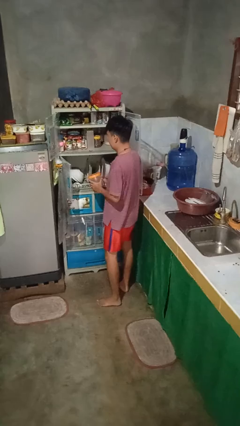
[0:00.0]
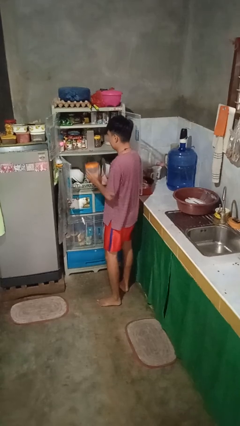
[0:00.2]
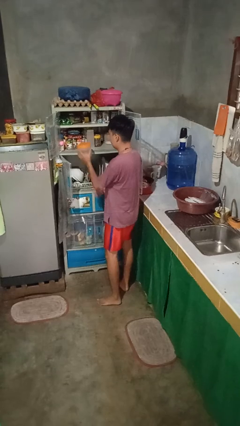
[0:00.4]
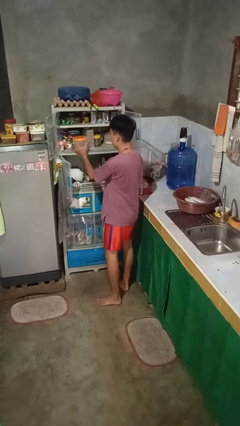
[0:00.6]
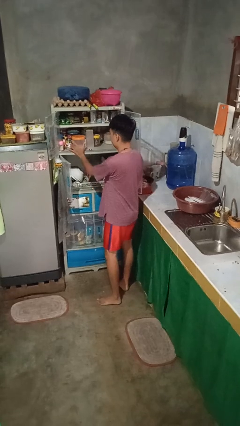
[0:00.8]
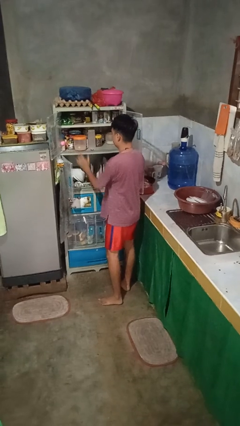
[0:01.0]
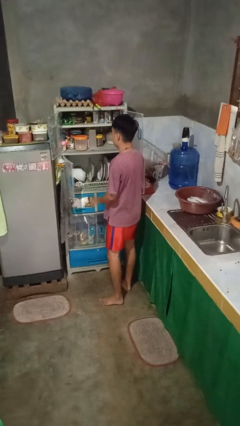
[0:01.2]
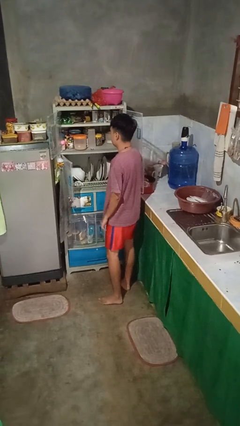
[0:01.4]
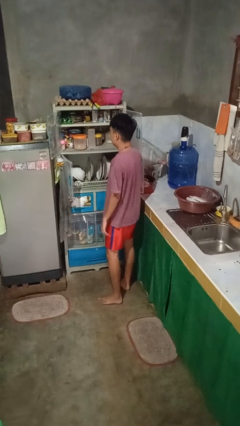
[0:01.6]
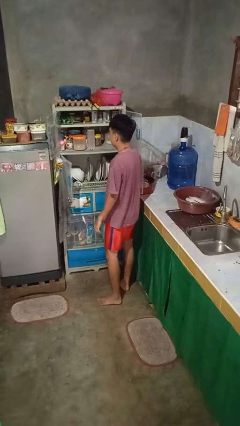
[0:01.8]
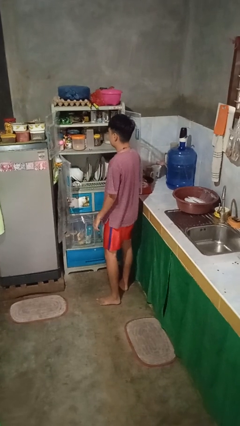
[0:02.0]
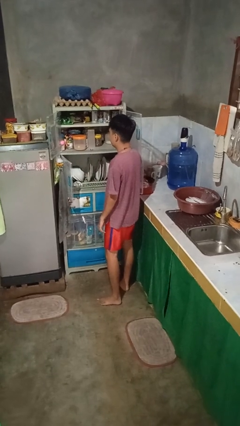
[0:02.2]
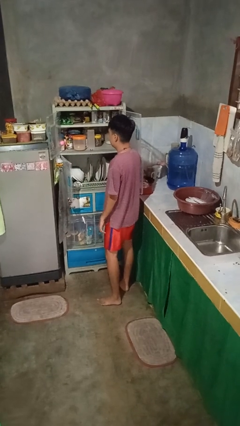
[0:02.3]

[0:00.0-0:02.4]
person puts object in cabinet

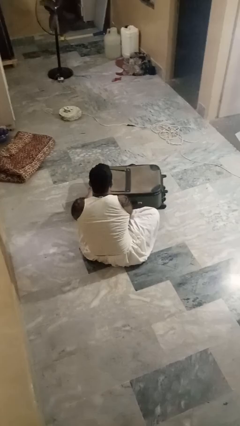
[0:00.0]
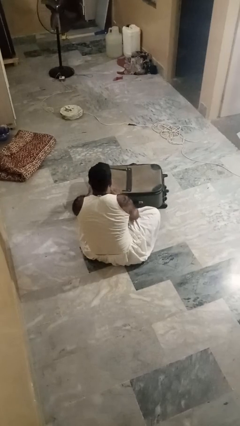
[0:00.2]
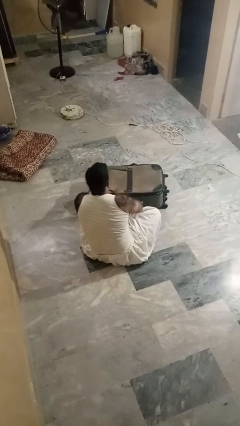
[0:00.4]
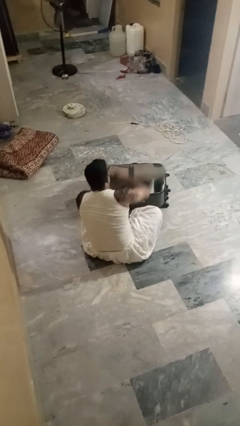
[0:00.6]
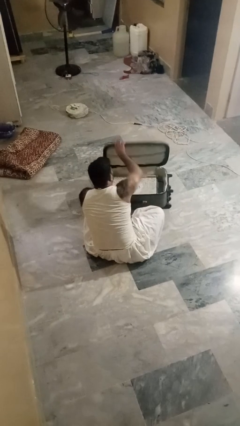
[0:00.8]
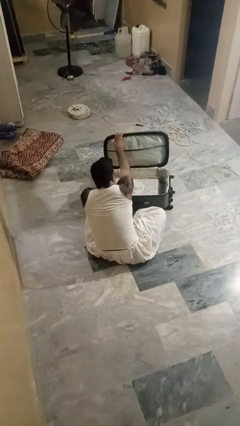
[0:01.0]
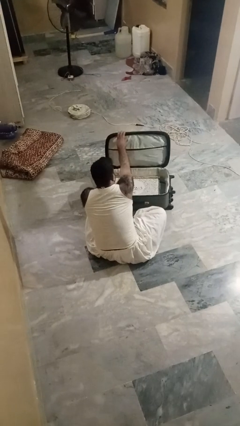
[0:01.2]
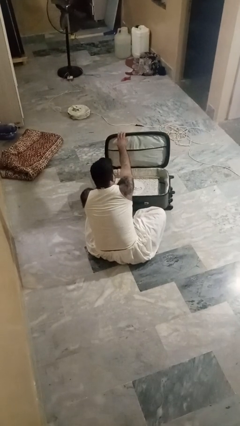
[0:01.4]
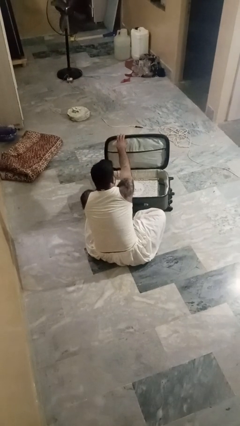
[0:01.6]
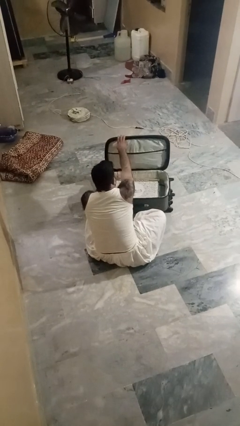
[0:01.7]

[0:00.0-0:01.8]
person closes suitcase

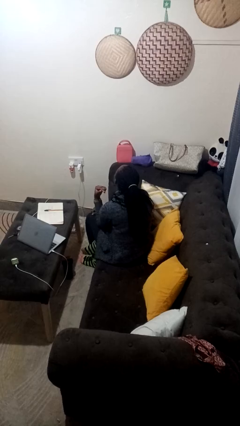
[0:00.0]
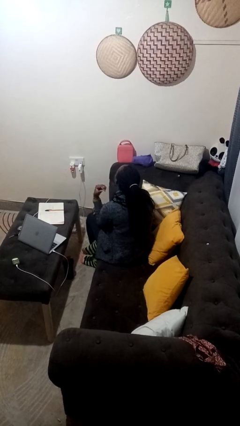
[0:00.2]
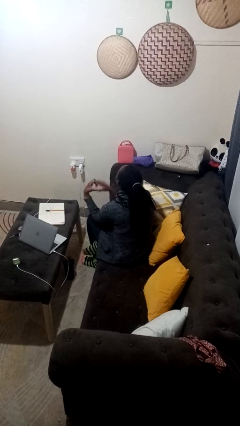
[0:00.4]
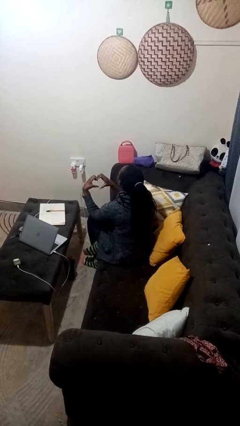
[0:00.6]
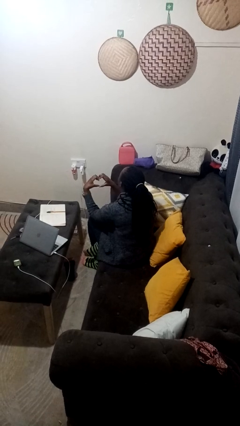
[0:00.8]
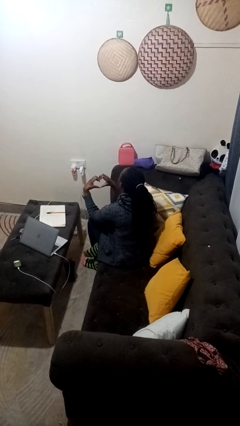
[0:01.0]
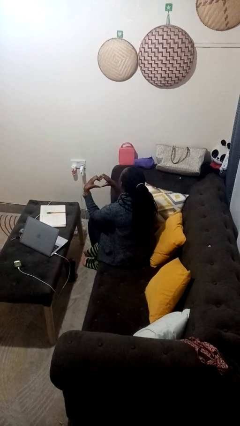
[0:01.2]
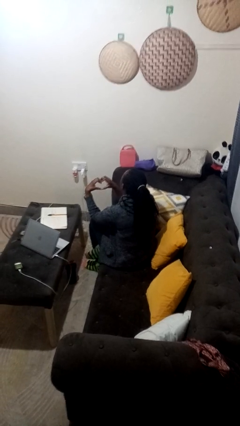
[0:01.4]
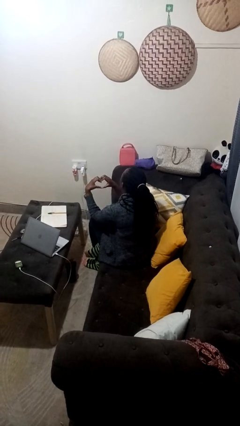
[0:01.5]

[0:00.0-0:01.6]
person gestures heart

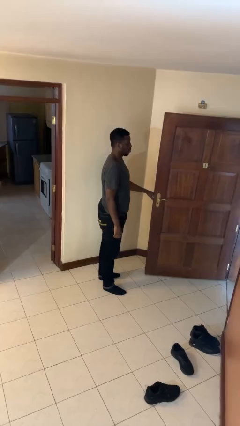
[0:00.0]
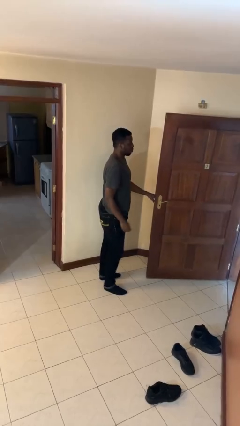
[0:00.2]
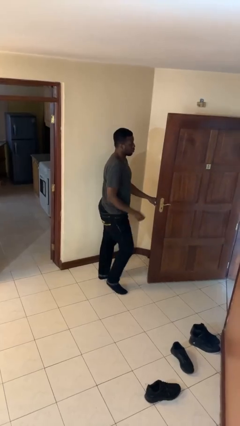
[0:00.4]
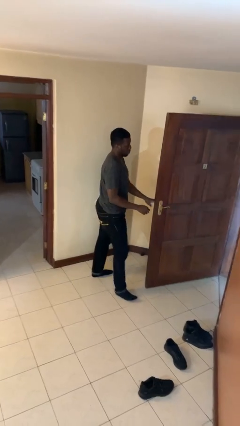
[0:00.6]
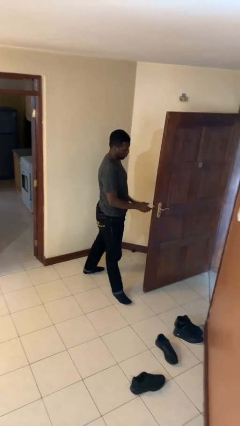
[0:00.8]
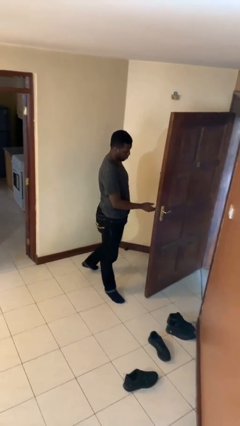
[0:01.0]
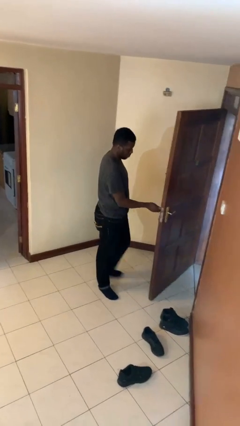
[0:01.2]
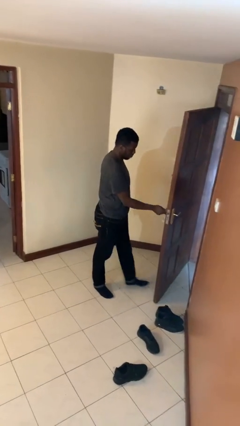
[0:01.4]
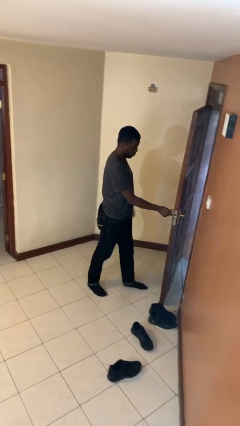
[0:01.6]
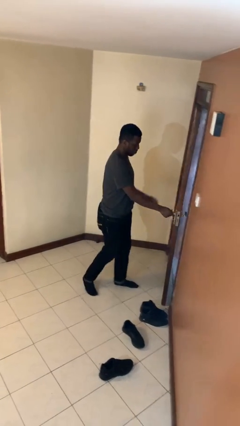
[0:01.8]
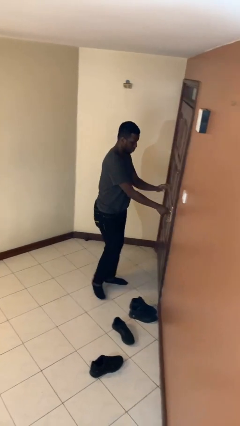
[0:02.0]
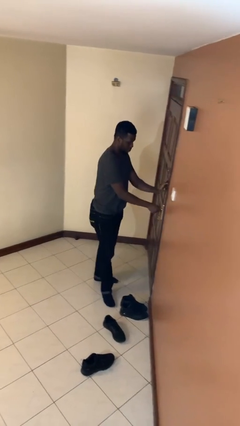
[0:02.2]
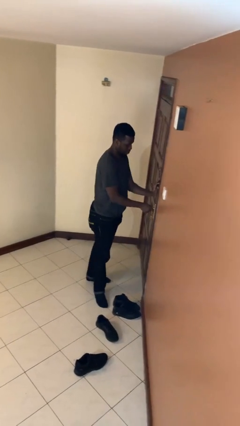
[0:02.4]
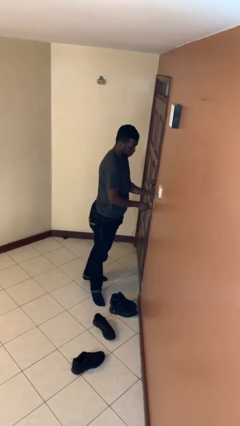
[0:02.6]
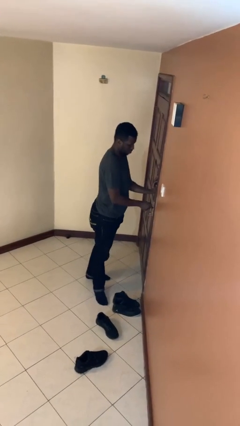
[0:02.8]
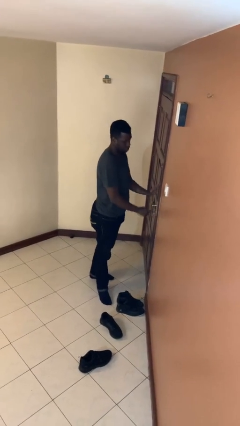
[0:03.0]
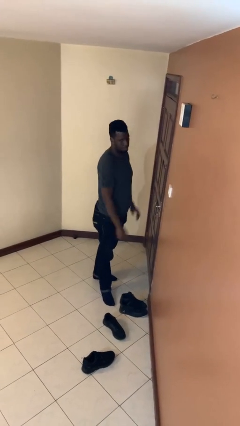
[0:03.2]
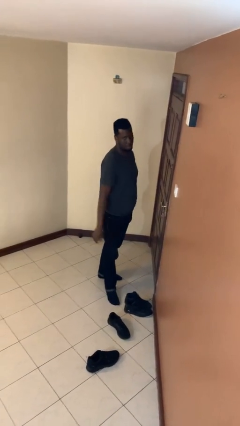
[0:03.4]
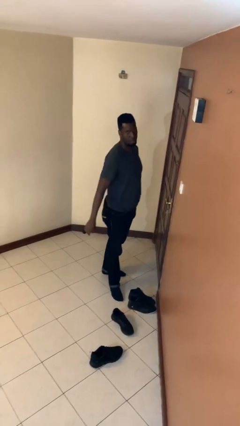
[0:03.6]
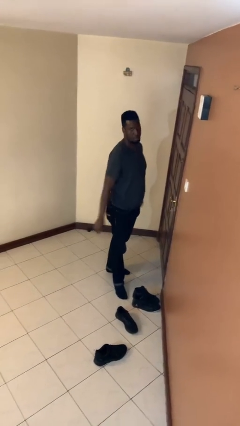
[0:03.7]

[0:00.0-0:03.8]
person closes facility door

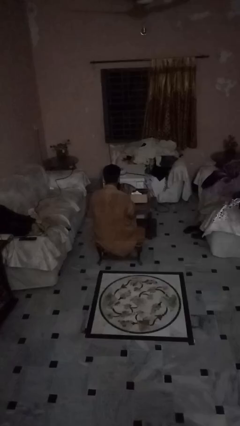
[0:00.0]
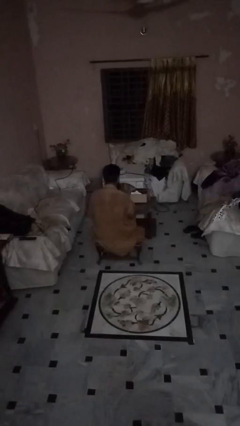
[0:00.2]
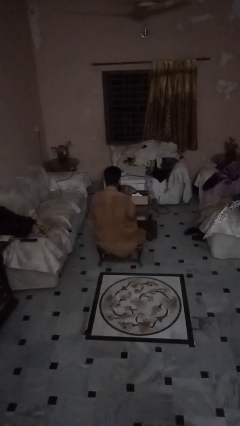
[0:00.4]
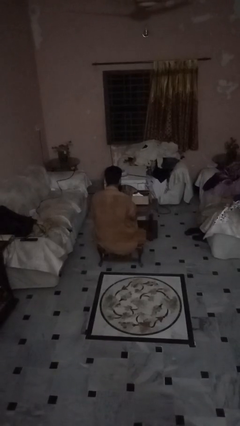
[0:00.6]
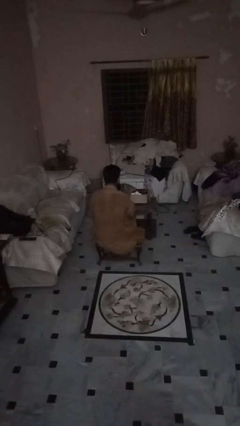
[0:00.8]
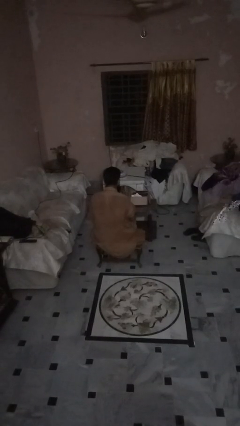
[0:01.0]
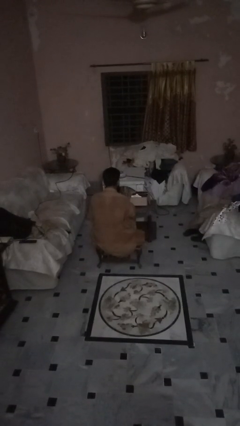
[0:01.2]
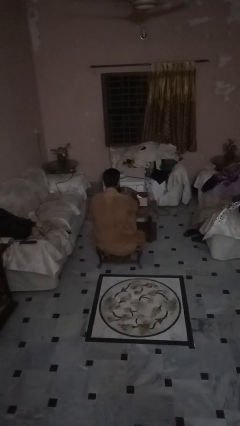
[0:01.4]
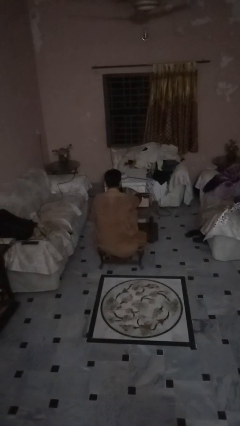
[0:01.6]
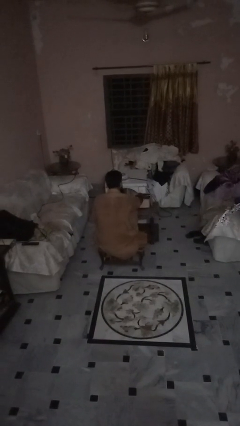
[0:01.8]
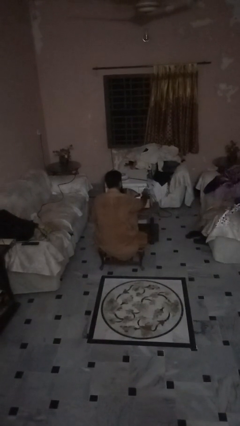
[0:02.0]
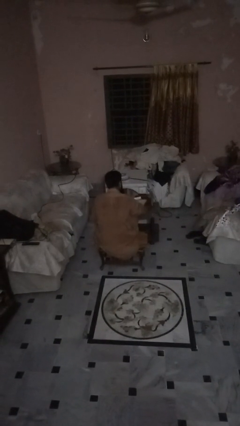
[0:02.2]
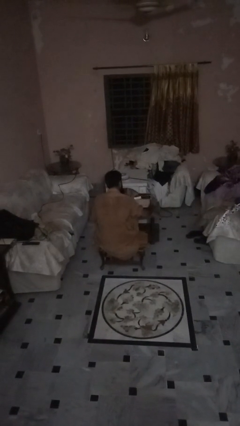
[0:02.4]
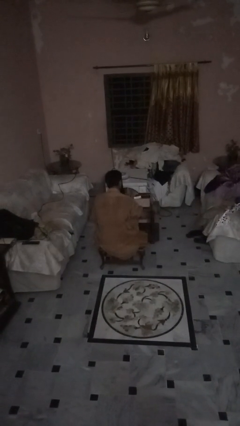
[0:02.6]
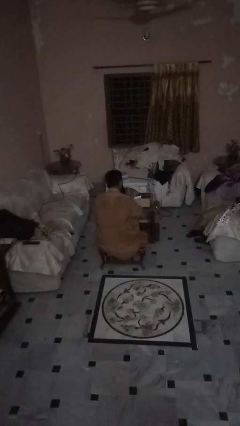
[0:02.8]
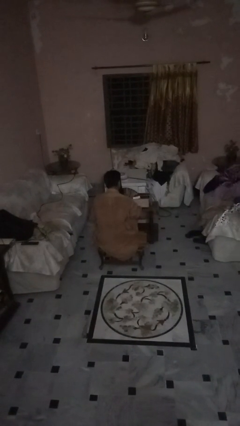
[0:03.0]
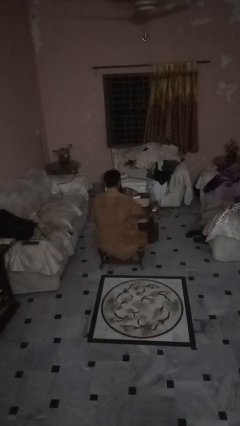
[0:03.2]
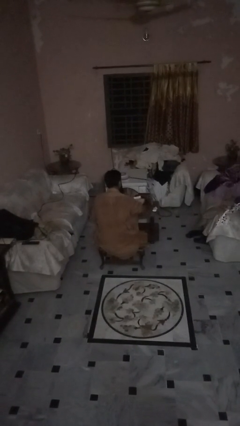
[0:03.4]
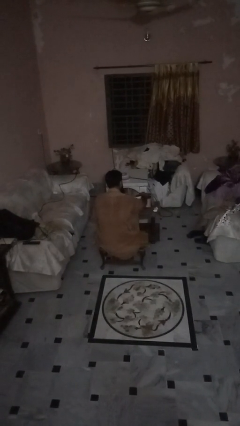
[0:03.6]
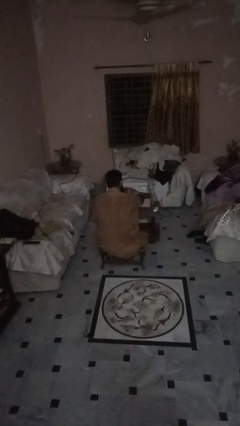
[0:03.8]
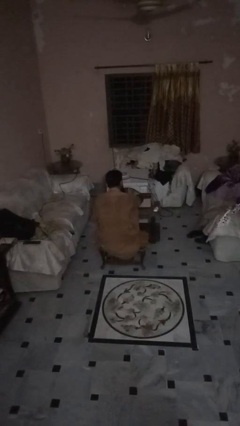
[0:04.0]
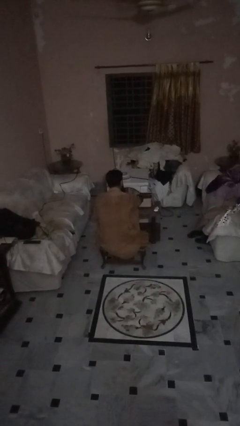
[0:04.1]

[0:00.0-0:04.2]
person unloads box onto table

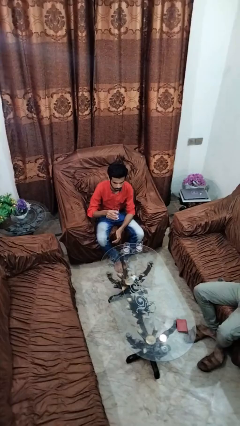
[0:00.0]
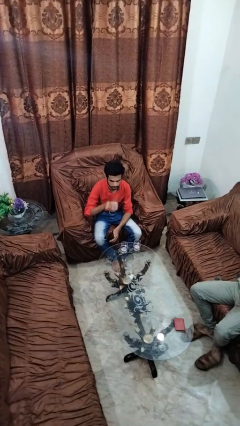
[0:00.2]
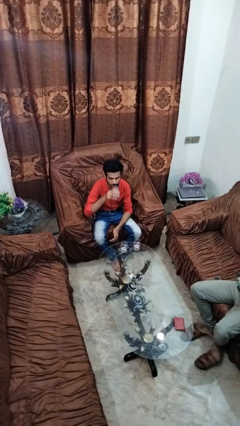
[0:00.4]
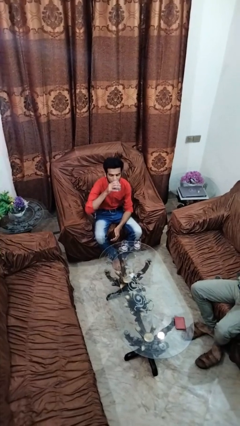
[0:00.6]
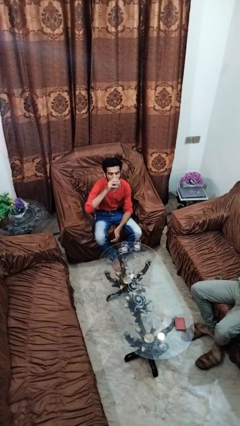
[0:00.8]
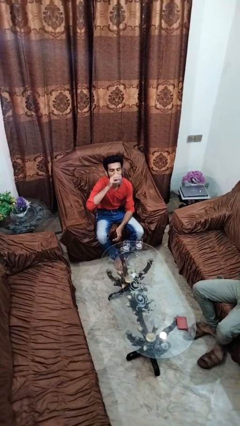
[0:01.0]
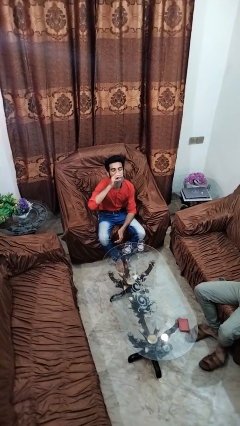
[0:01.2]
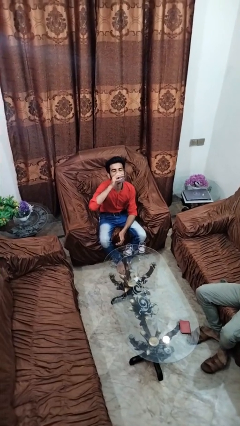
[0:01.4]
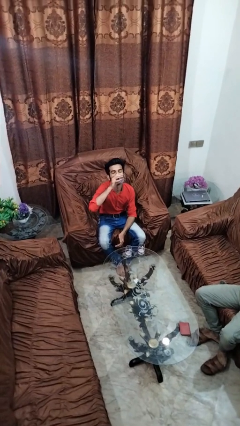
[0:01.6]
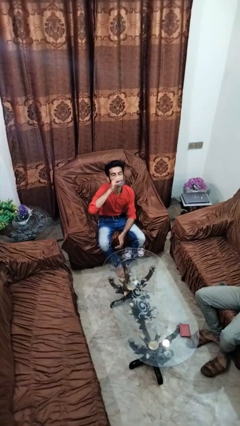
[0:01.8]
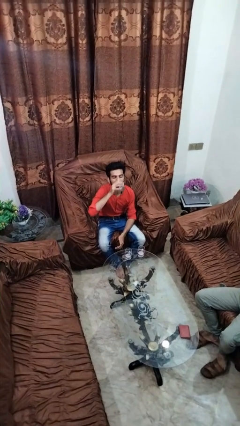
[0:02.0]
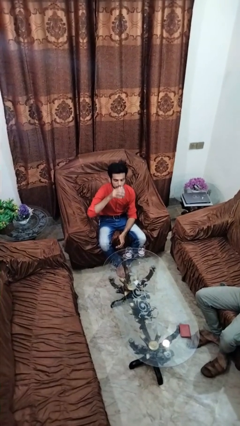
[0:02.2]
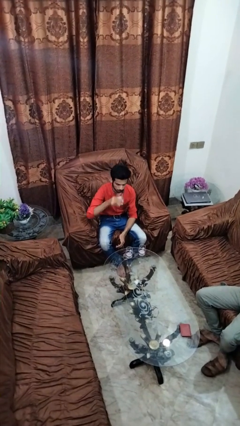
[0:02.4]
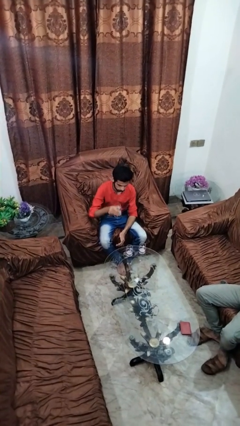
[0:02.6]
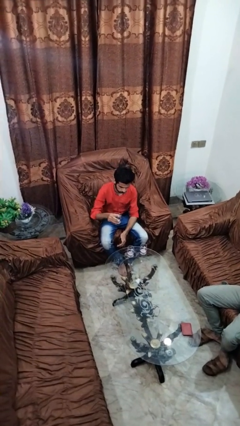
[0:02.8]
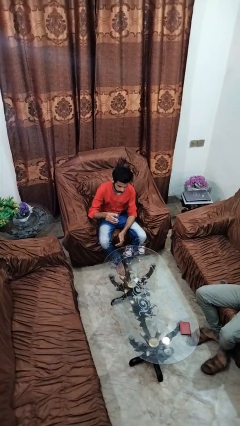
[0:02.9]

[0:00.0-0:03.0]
person drinks from shotglass

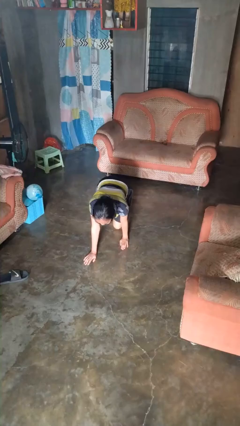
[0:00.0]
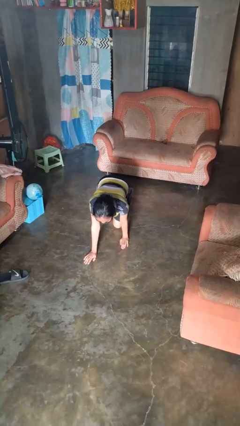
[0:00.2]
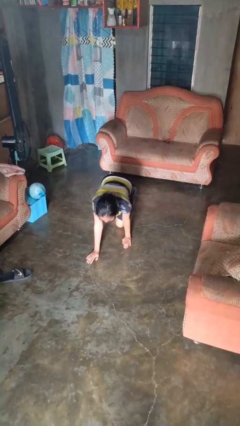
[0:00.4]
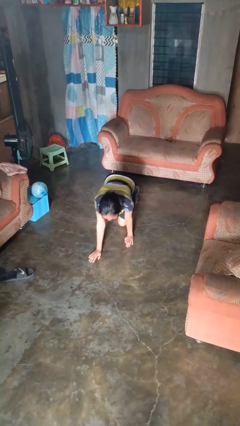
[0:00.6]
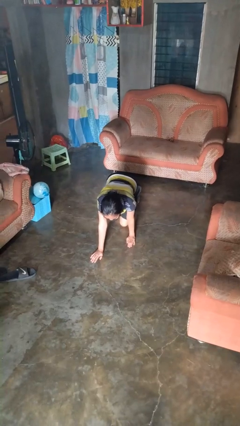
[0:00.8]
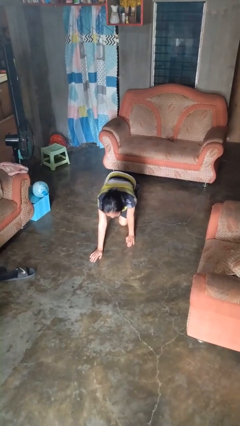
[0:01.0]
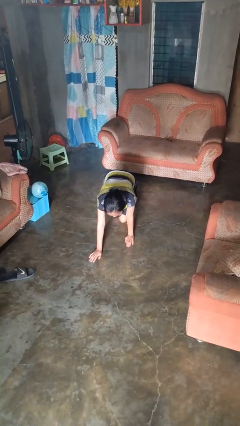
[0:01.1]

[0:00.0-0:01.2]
person crawls
